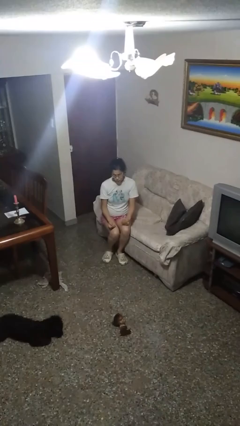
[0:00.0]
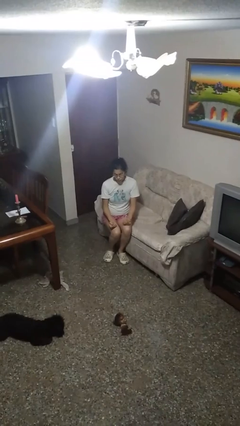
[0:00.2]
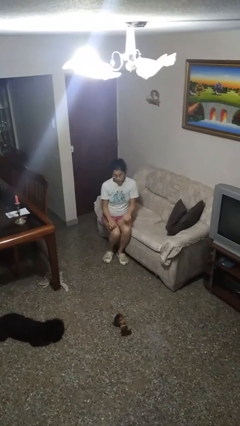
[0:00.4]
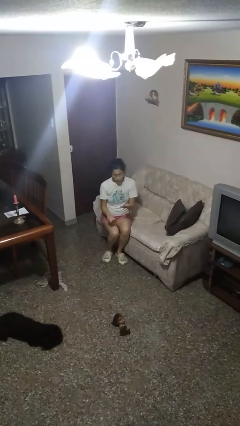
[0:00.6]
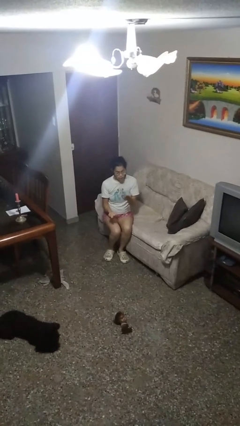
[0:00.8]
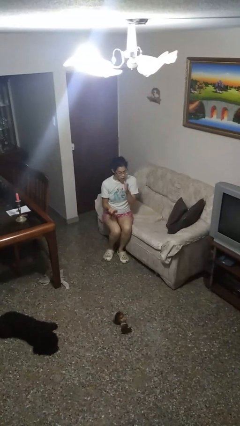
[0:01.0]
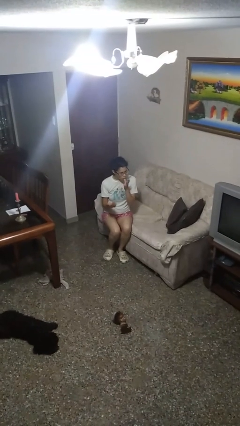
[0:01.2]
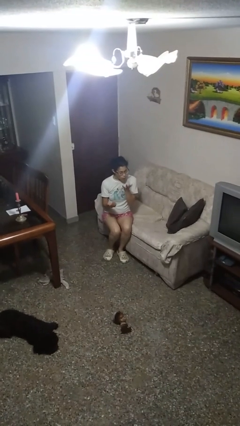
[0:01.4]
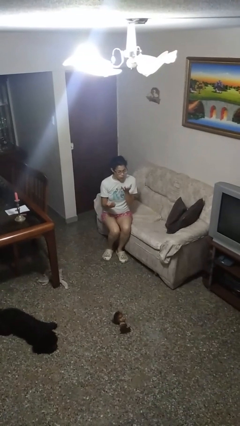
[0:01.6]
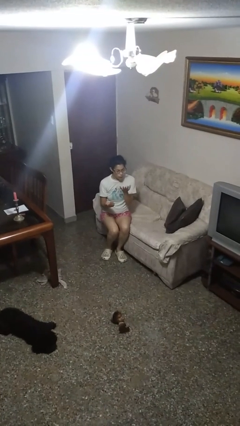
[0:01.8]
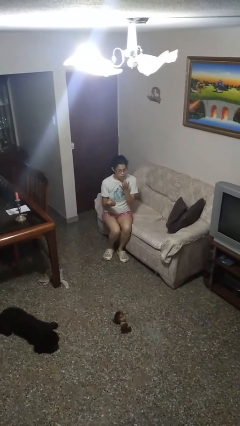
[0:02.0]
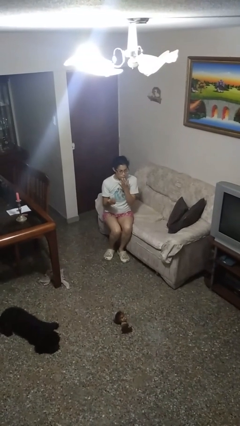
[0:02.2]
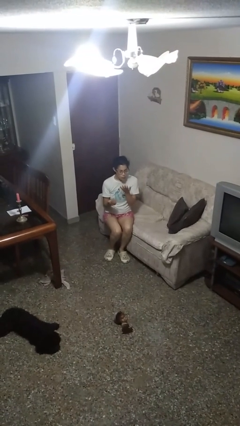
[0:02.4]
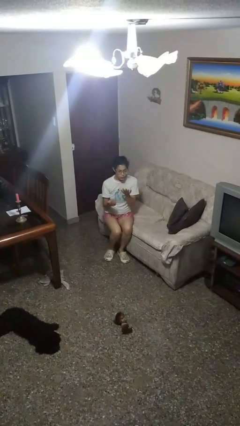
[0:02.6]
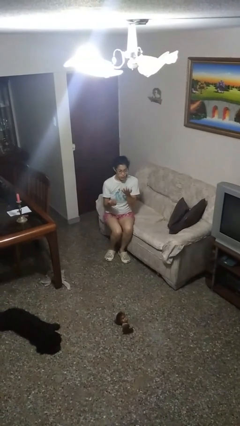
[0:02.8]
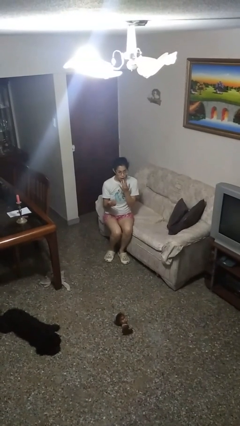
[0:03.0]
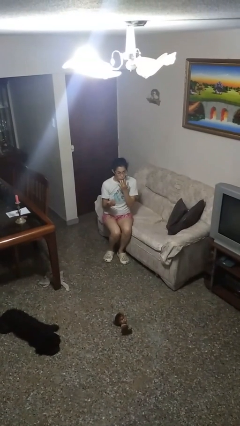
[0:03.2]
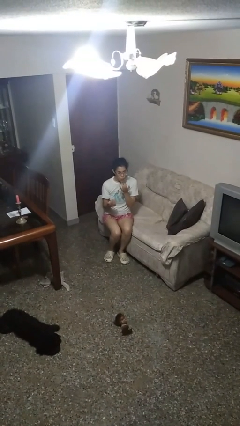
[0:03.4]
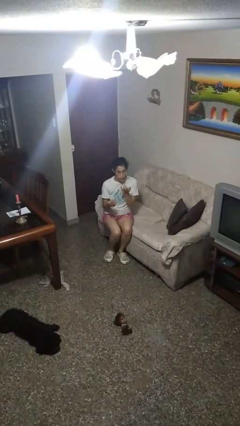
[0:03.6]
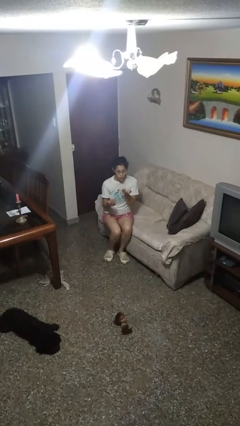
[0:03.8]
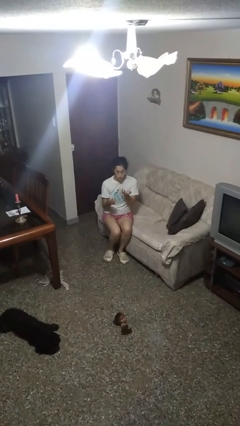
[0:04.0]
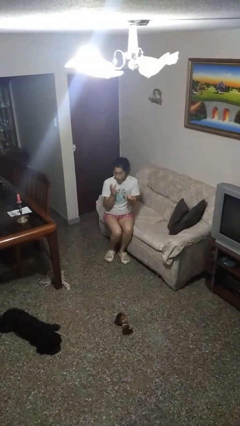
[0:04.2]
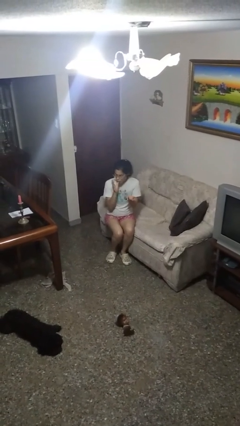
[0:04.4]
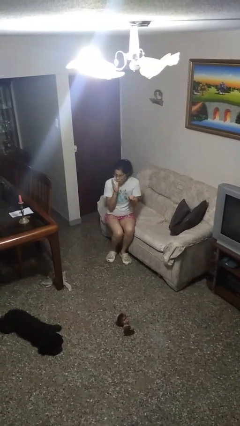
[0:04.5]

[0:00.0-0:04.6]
person licks fingers

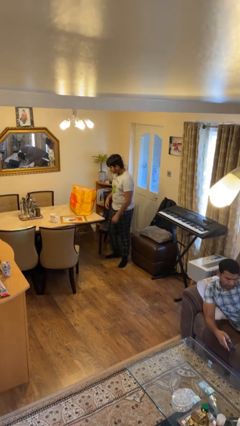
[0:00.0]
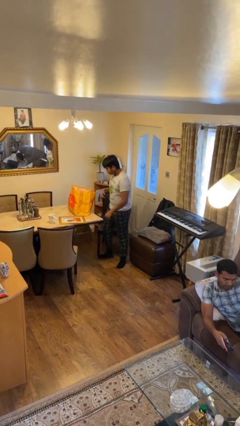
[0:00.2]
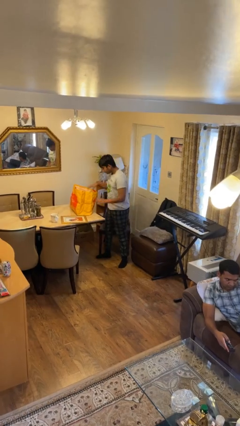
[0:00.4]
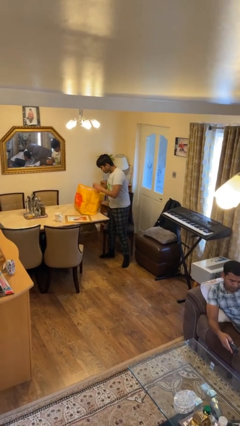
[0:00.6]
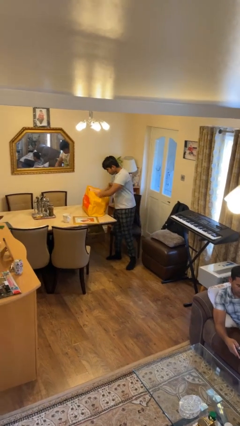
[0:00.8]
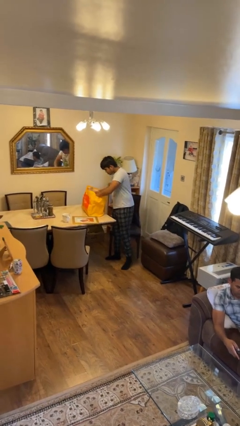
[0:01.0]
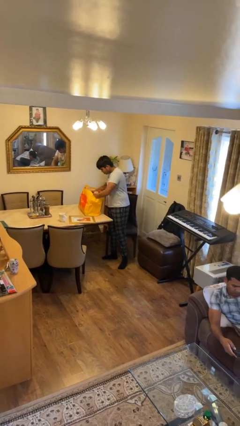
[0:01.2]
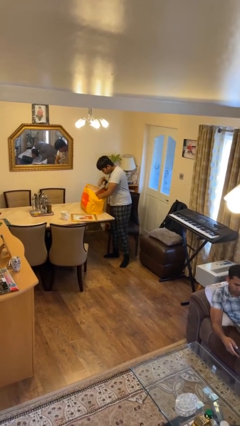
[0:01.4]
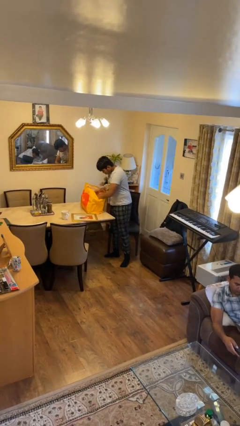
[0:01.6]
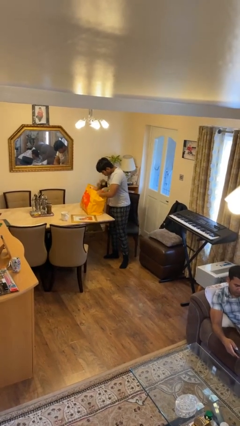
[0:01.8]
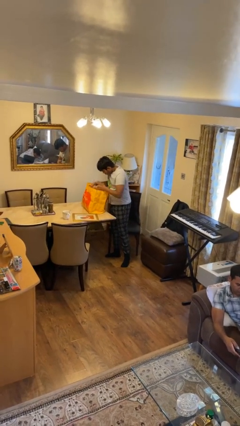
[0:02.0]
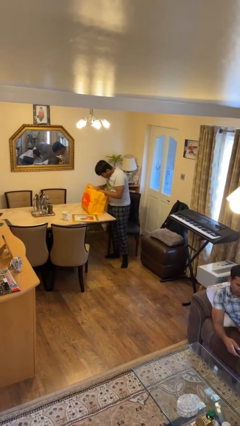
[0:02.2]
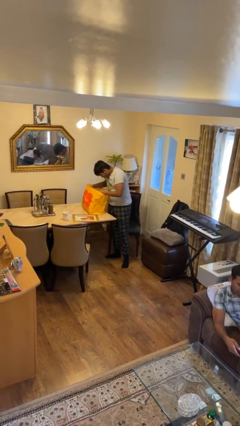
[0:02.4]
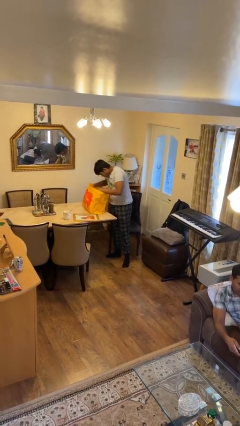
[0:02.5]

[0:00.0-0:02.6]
person searches in bag

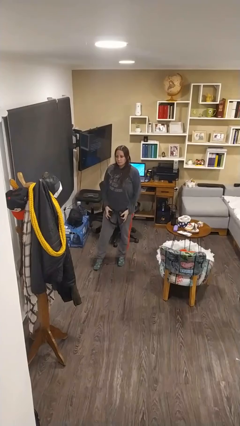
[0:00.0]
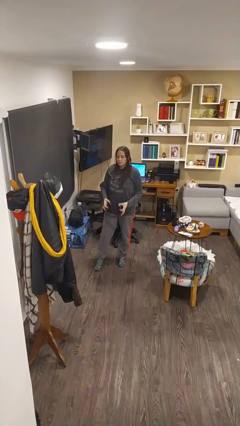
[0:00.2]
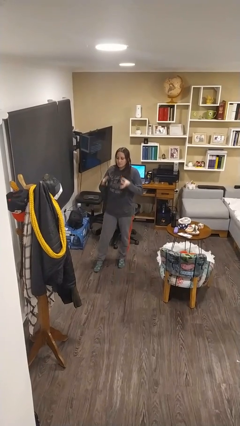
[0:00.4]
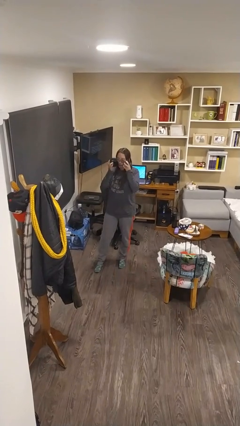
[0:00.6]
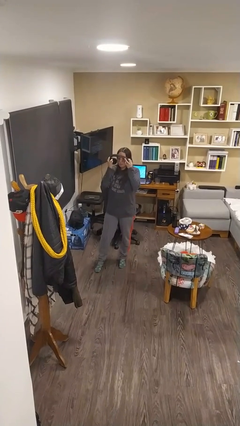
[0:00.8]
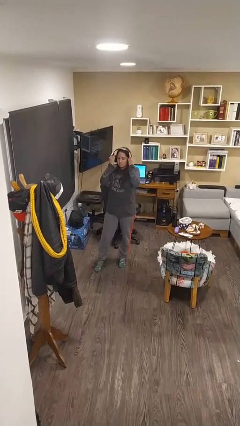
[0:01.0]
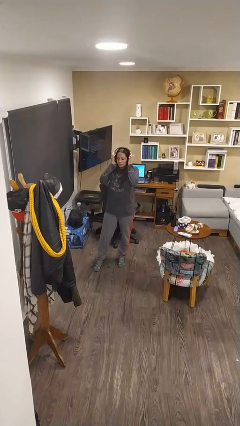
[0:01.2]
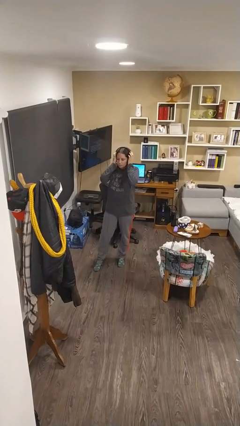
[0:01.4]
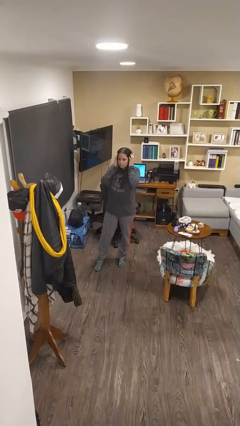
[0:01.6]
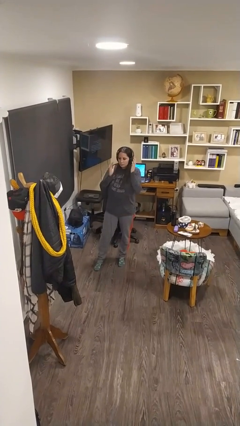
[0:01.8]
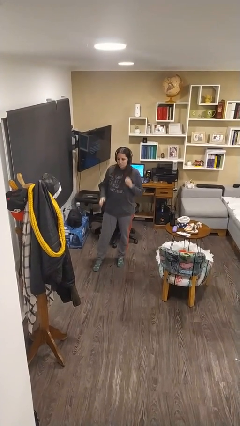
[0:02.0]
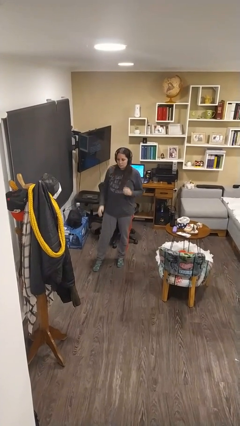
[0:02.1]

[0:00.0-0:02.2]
person puts on headphones

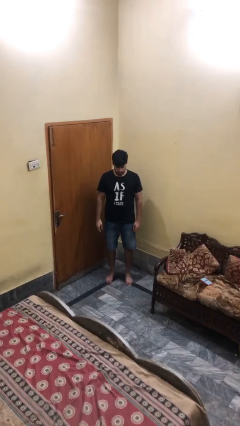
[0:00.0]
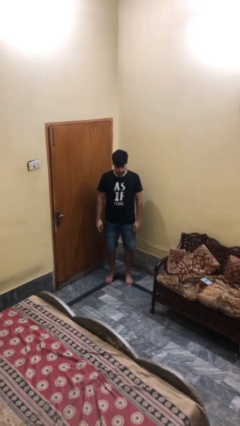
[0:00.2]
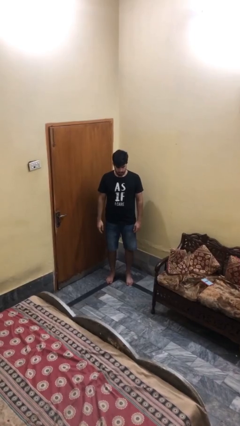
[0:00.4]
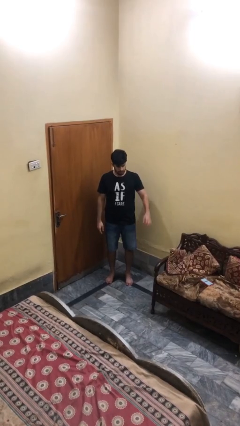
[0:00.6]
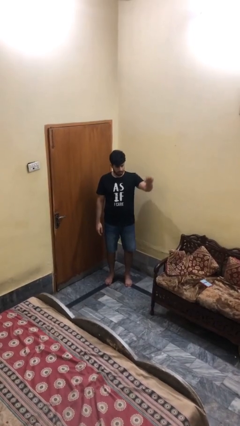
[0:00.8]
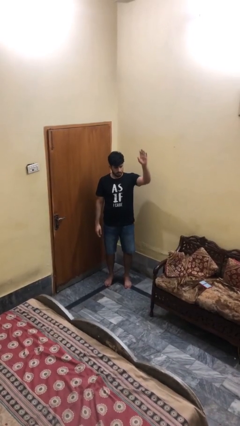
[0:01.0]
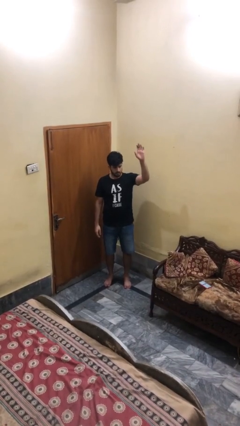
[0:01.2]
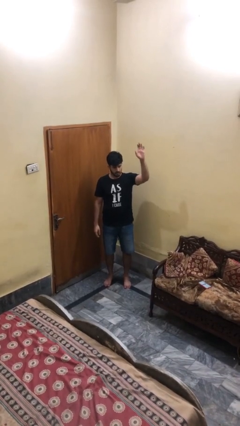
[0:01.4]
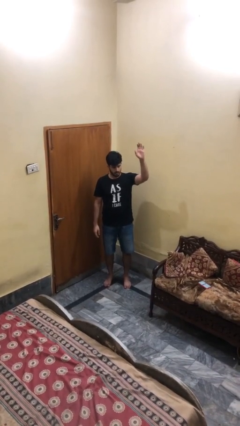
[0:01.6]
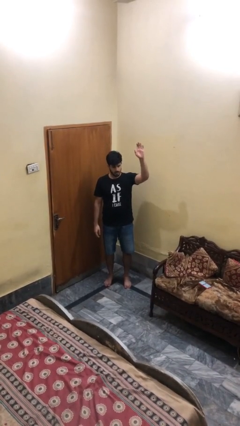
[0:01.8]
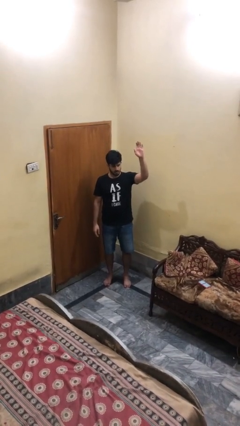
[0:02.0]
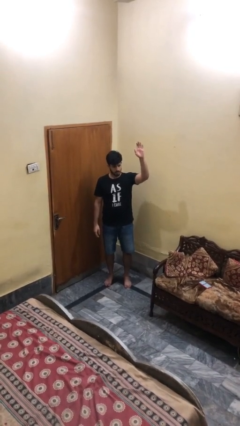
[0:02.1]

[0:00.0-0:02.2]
person gestures raise hand

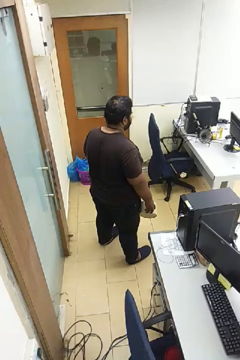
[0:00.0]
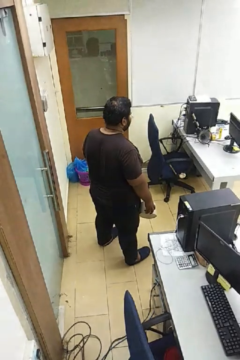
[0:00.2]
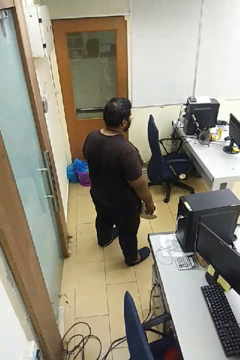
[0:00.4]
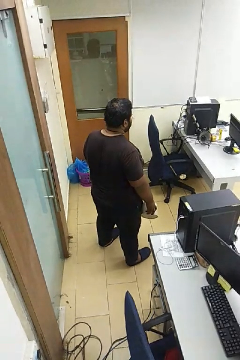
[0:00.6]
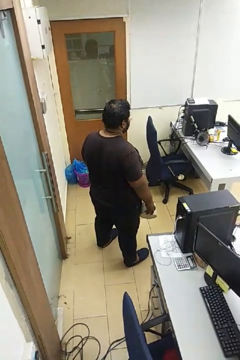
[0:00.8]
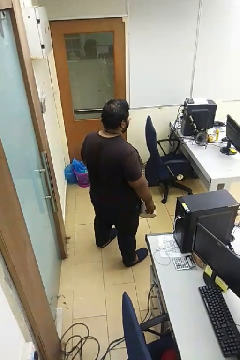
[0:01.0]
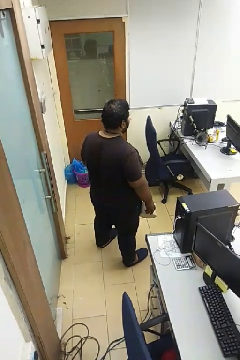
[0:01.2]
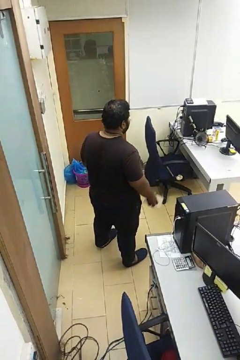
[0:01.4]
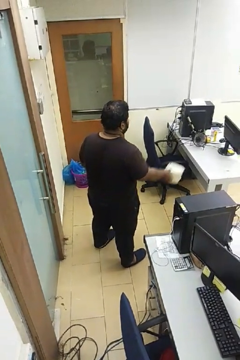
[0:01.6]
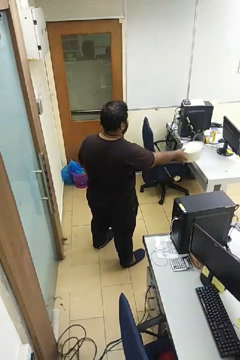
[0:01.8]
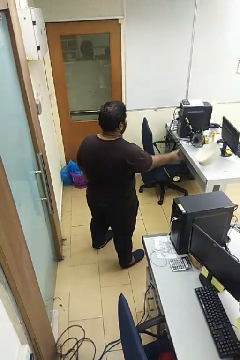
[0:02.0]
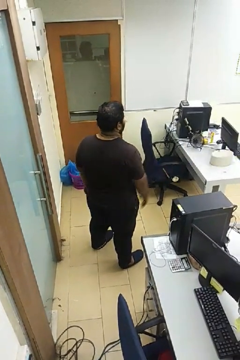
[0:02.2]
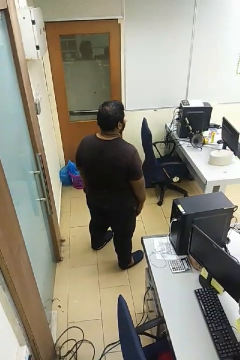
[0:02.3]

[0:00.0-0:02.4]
person throws object on table

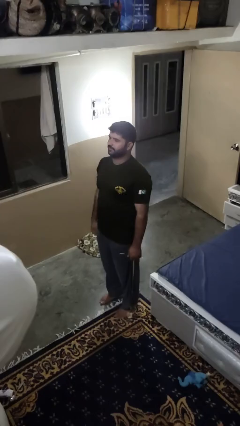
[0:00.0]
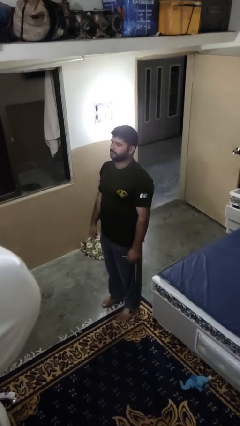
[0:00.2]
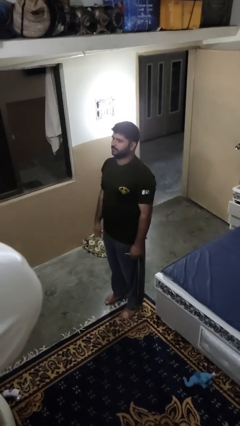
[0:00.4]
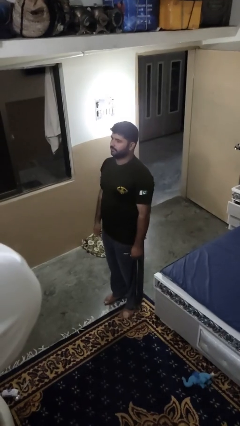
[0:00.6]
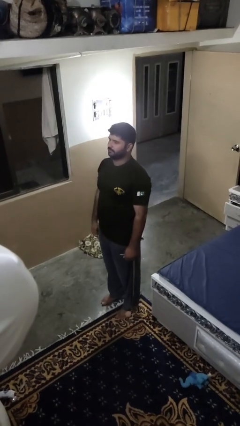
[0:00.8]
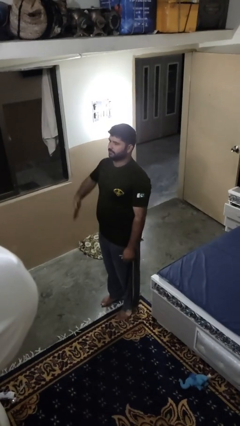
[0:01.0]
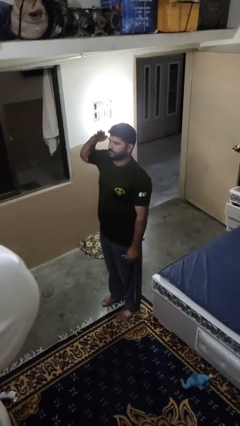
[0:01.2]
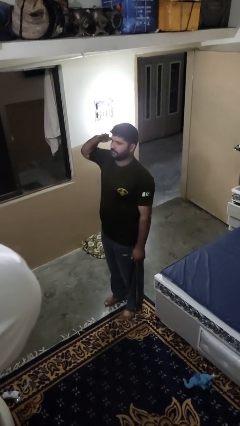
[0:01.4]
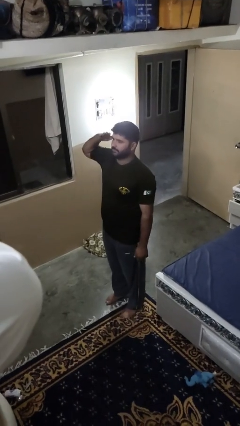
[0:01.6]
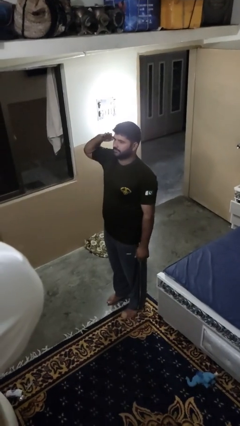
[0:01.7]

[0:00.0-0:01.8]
person salutes

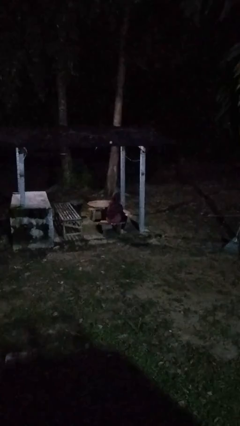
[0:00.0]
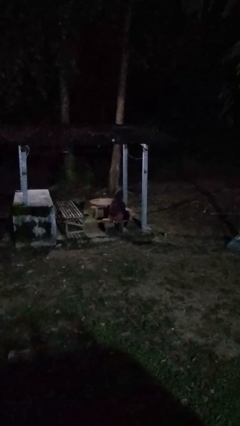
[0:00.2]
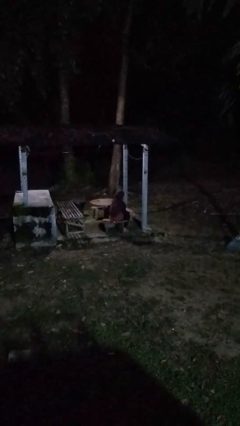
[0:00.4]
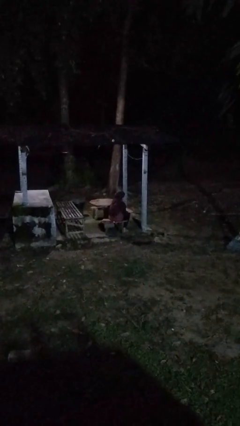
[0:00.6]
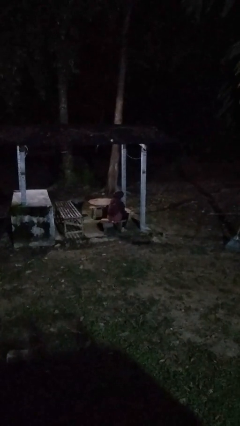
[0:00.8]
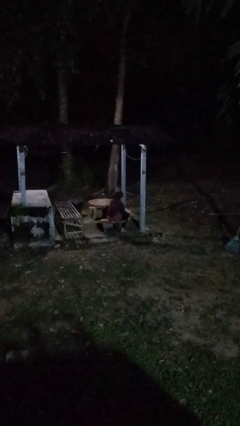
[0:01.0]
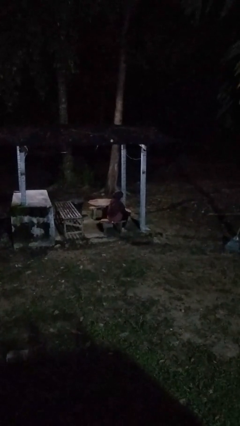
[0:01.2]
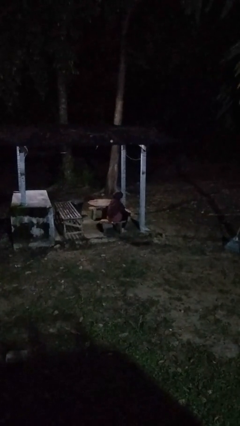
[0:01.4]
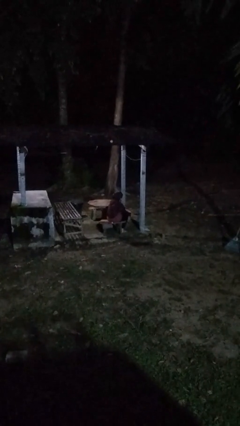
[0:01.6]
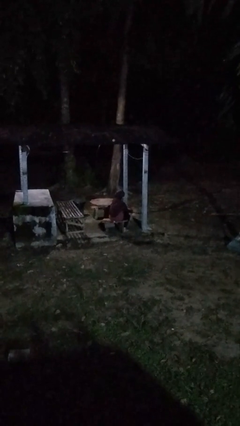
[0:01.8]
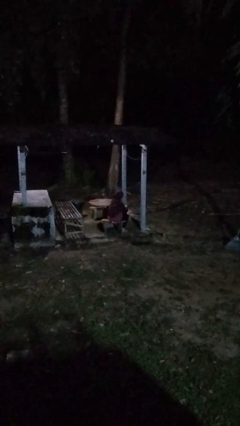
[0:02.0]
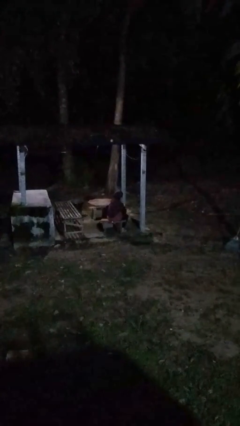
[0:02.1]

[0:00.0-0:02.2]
person rubs foot
